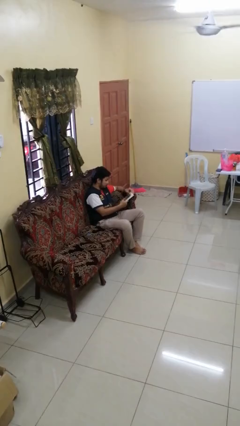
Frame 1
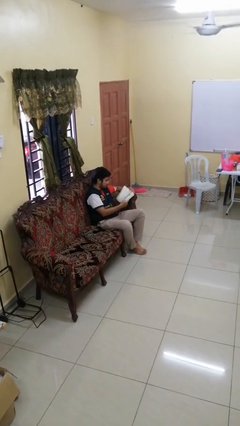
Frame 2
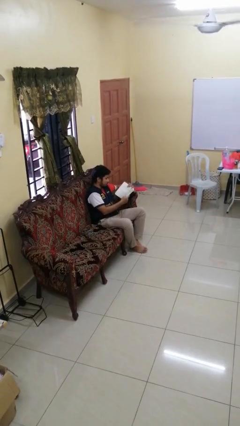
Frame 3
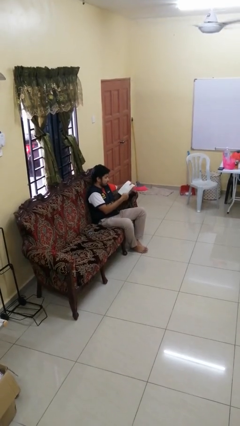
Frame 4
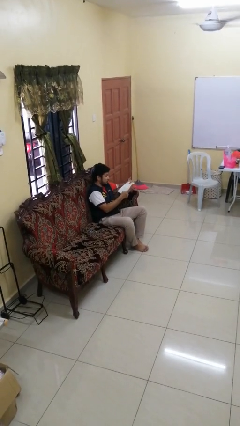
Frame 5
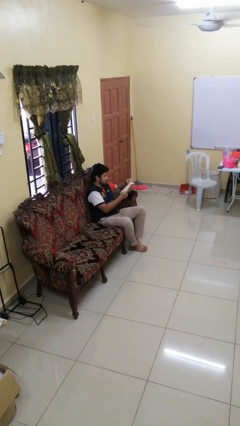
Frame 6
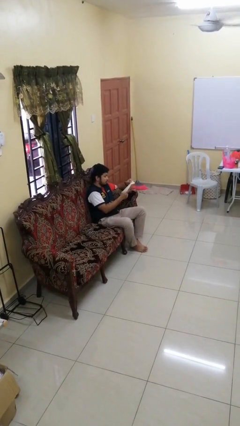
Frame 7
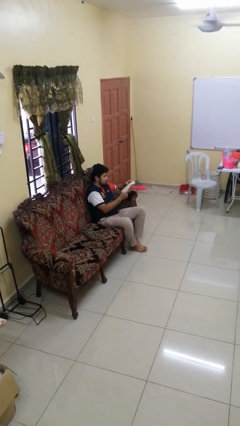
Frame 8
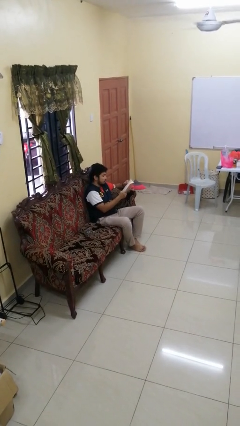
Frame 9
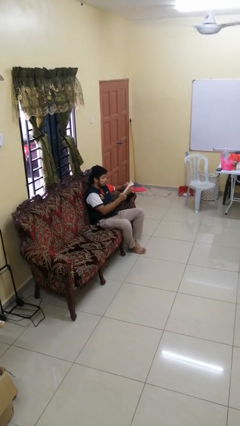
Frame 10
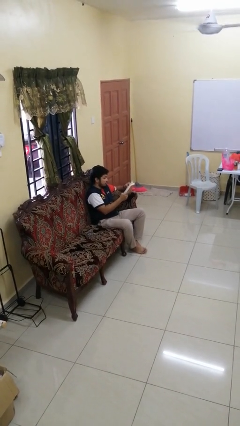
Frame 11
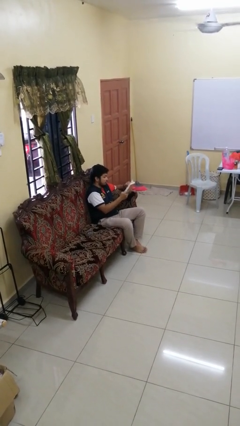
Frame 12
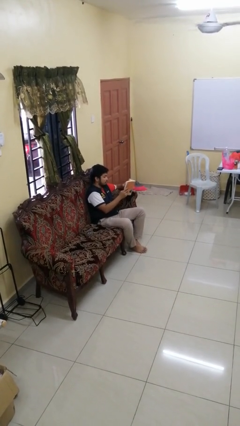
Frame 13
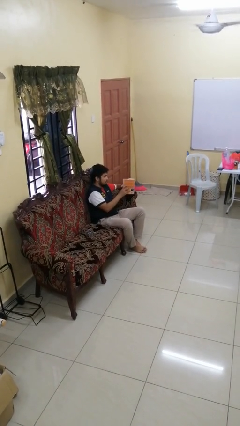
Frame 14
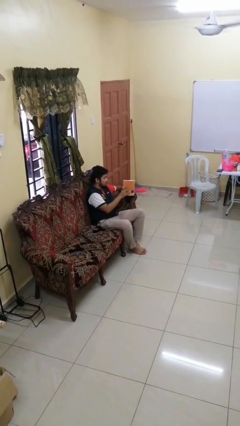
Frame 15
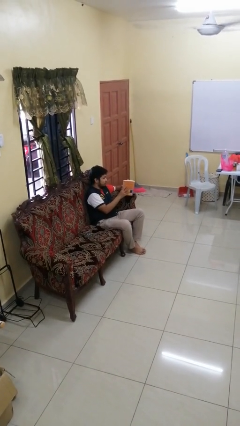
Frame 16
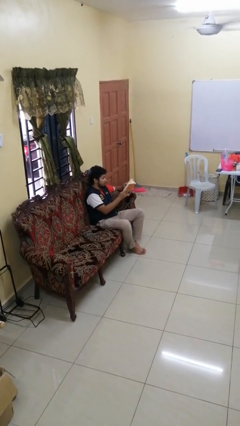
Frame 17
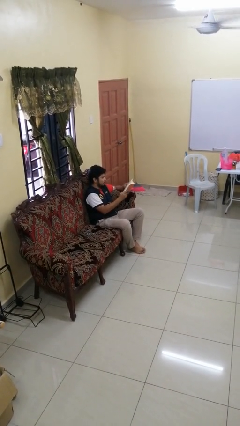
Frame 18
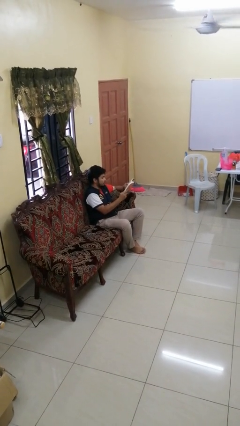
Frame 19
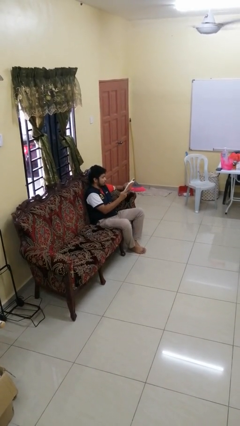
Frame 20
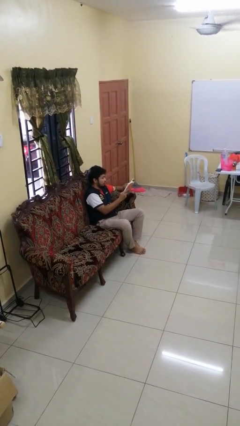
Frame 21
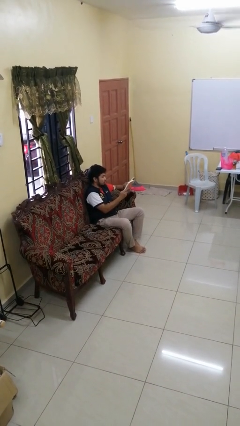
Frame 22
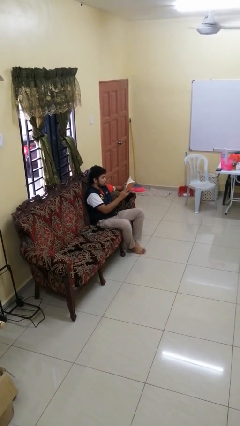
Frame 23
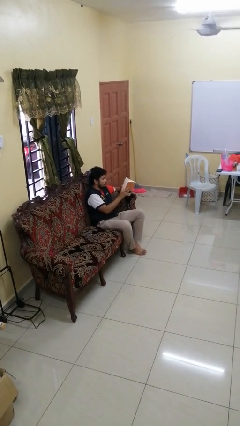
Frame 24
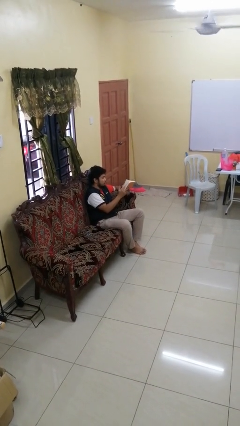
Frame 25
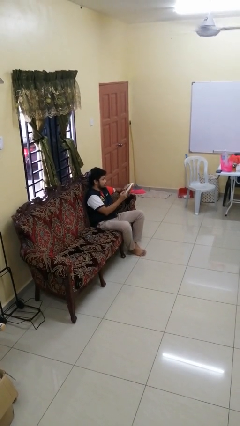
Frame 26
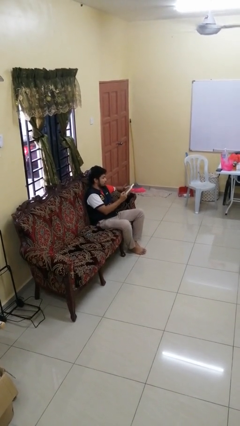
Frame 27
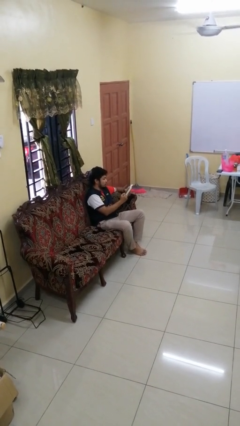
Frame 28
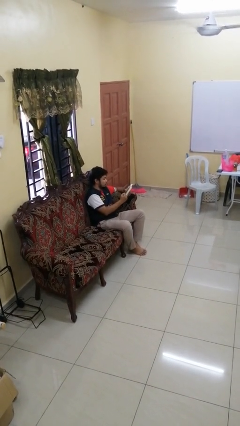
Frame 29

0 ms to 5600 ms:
person reads book

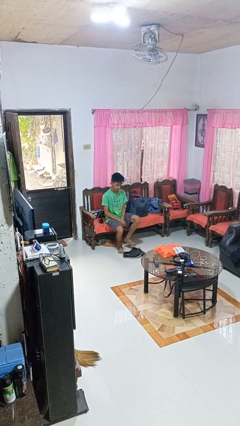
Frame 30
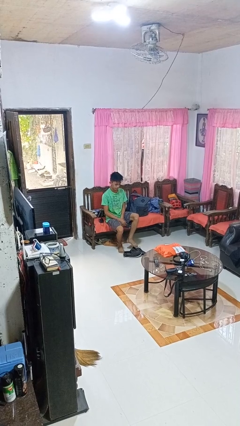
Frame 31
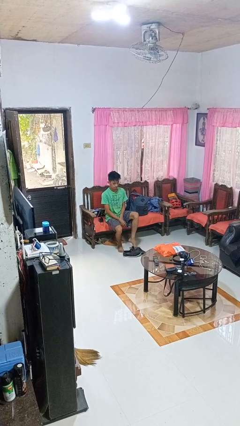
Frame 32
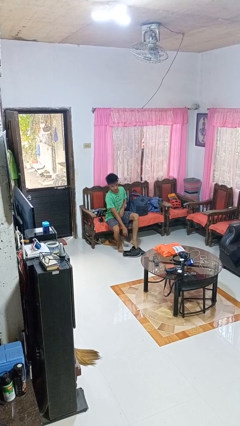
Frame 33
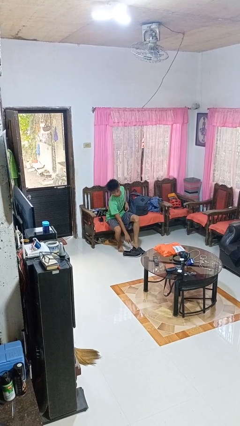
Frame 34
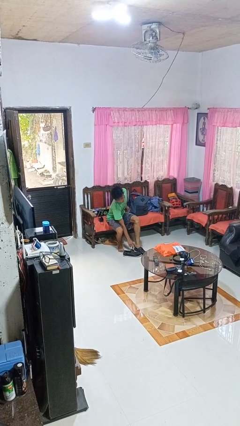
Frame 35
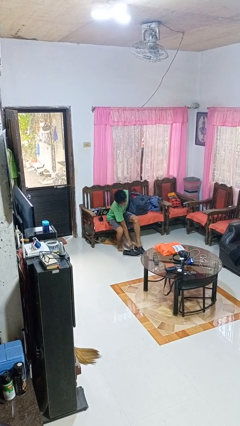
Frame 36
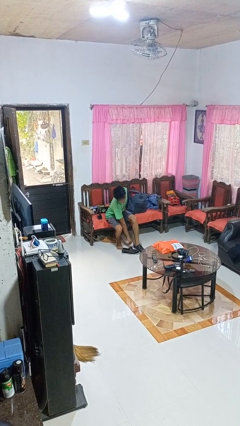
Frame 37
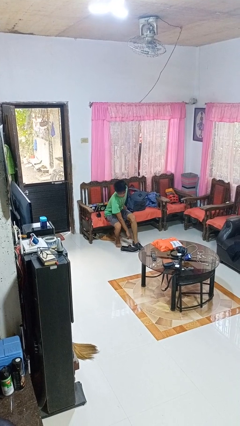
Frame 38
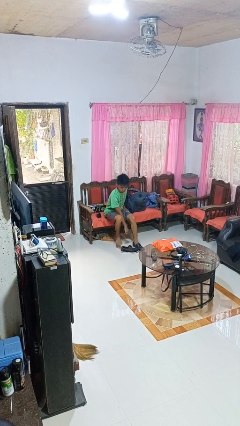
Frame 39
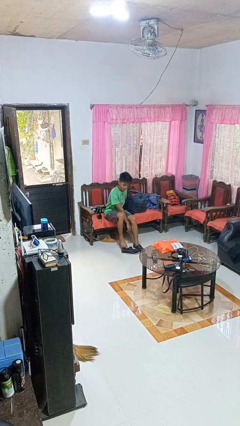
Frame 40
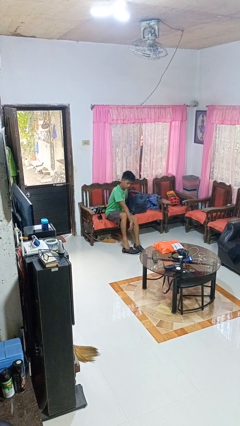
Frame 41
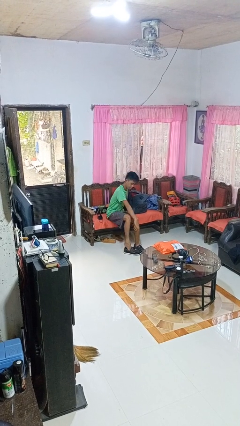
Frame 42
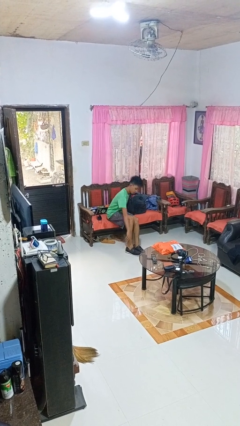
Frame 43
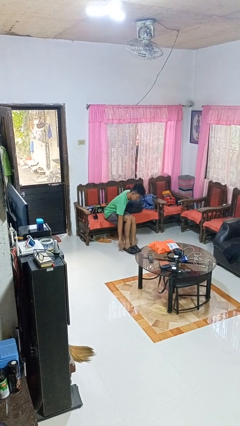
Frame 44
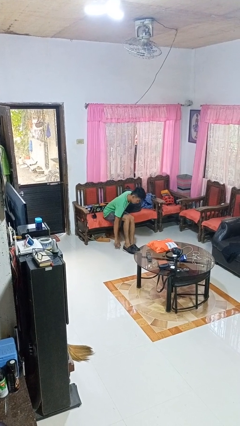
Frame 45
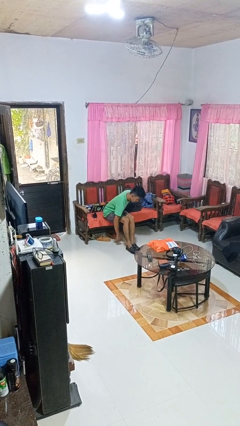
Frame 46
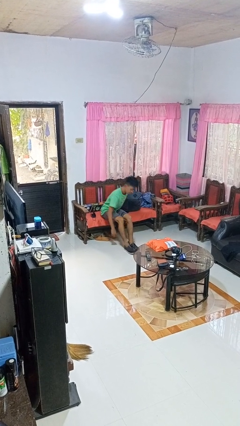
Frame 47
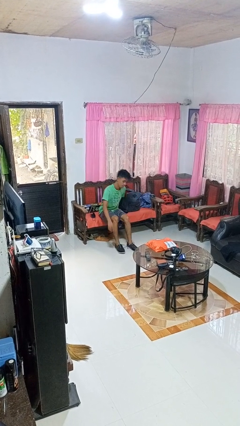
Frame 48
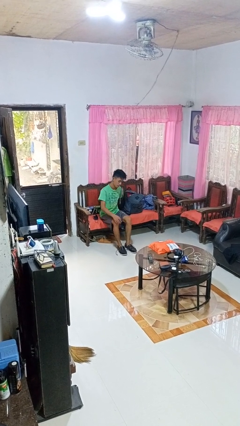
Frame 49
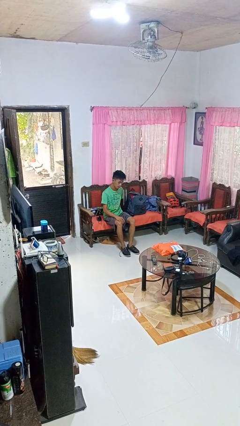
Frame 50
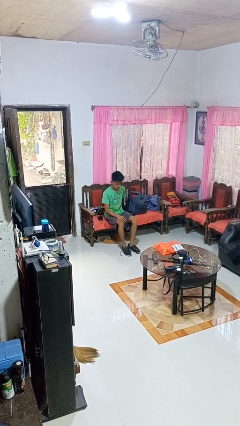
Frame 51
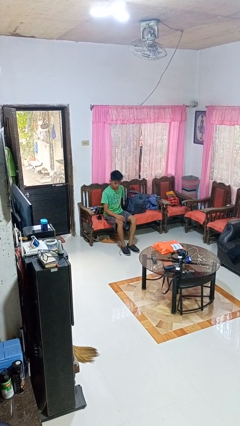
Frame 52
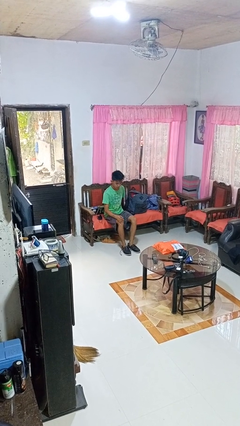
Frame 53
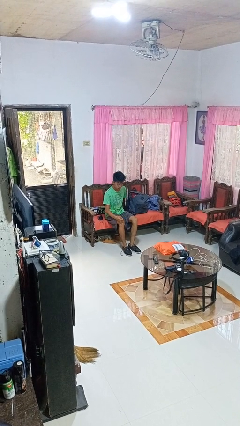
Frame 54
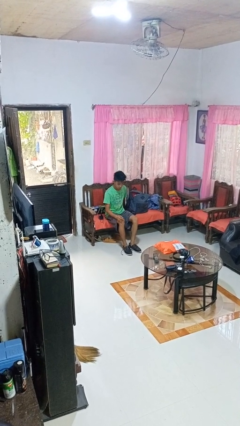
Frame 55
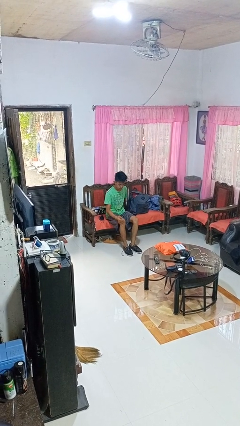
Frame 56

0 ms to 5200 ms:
person puts on shoes

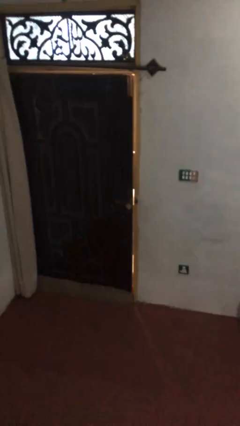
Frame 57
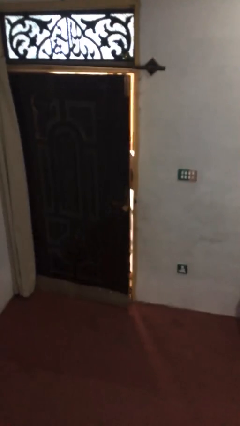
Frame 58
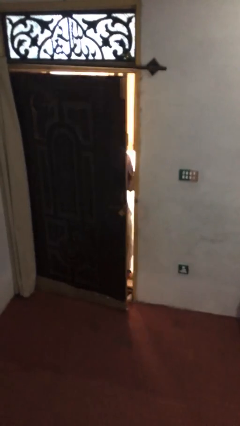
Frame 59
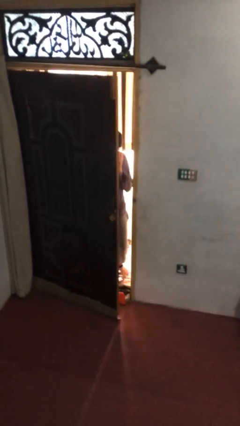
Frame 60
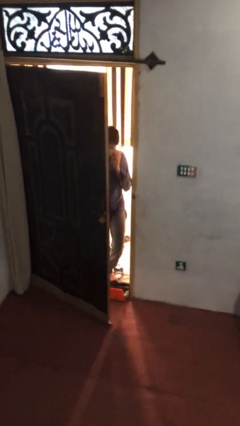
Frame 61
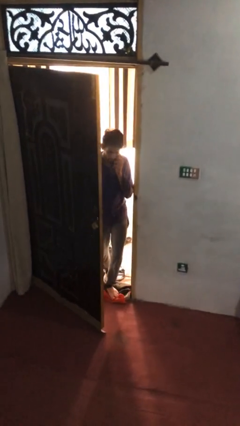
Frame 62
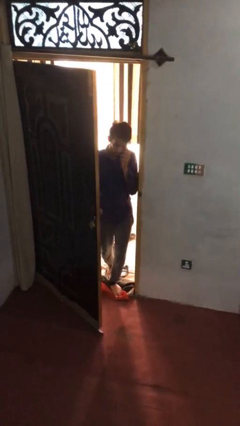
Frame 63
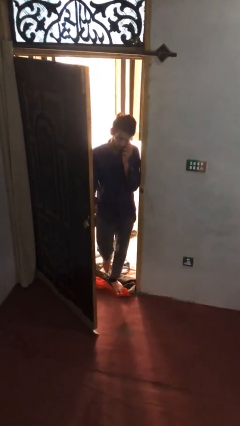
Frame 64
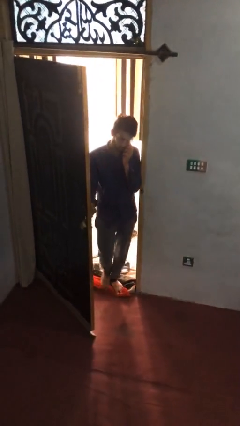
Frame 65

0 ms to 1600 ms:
person opens facility door

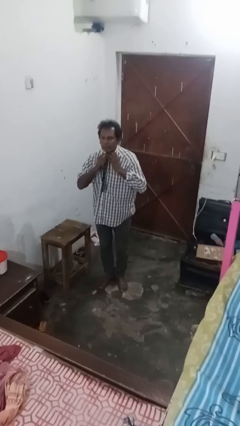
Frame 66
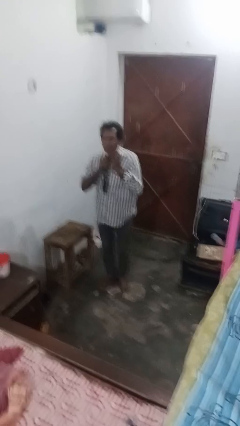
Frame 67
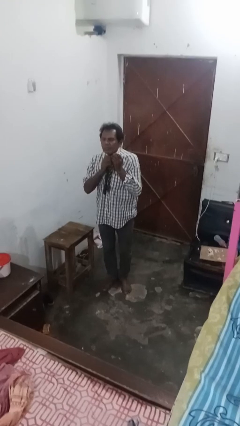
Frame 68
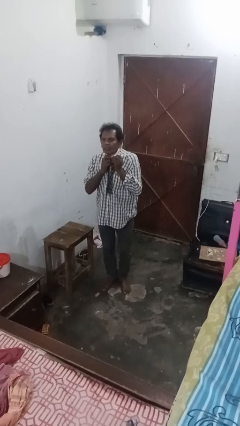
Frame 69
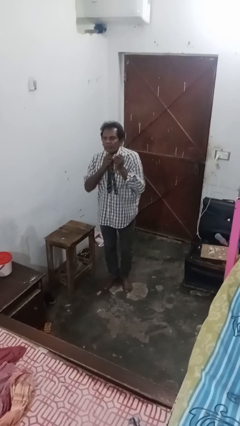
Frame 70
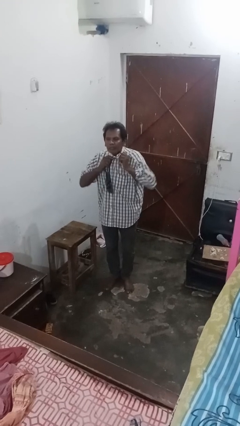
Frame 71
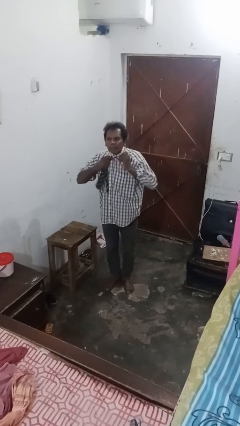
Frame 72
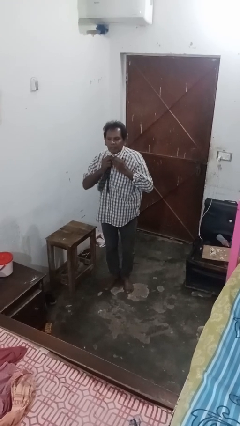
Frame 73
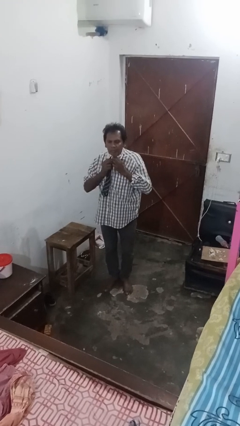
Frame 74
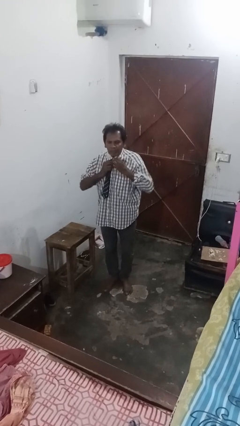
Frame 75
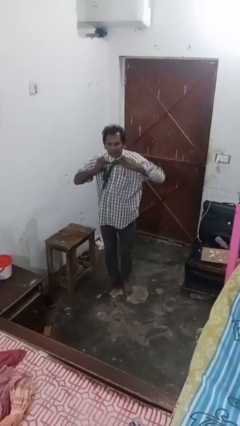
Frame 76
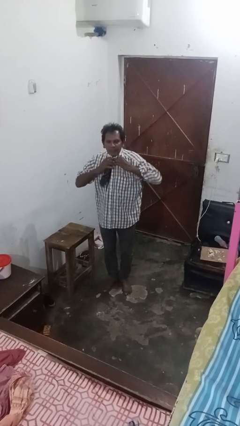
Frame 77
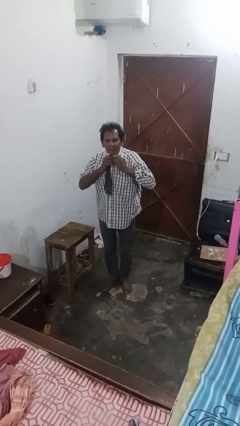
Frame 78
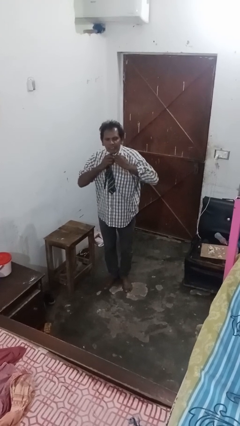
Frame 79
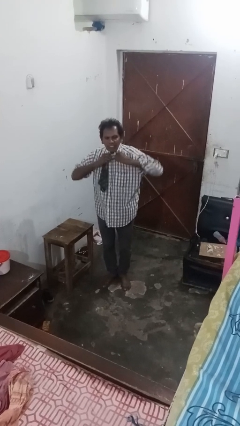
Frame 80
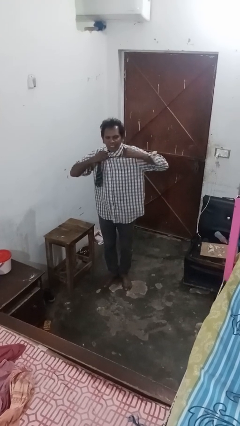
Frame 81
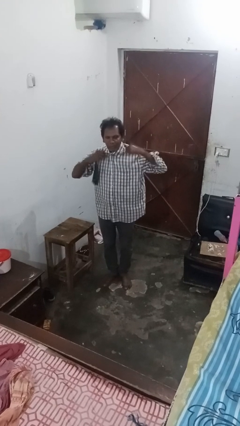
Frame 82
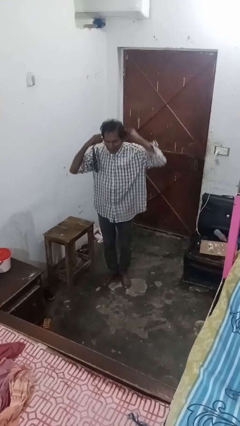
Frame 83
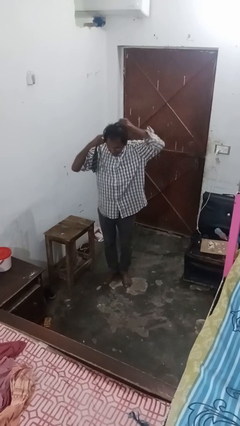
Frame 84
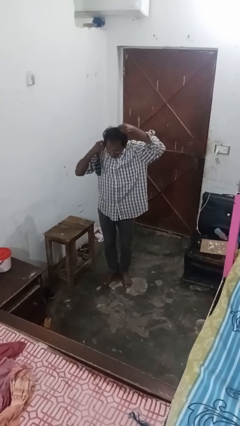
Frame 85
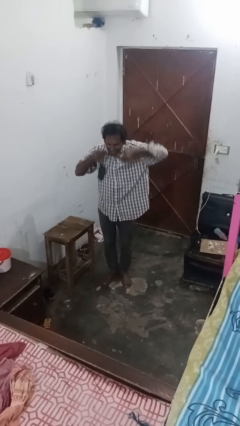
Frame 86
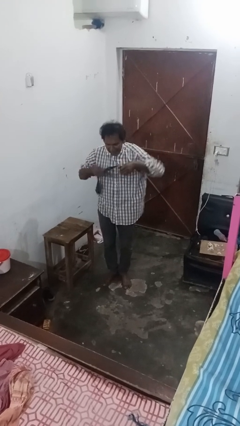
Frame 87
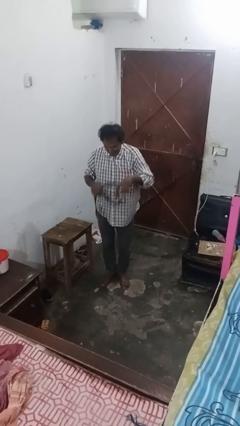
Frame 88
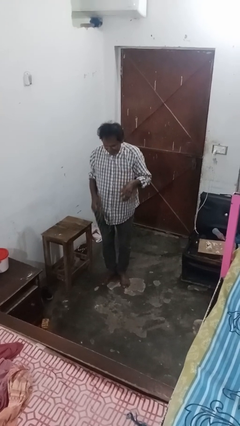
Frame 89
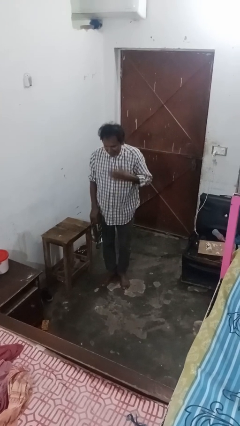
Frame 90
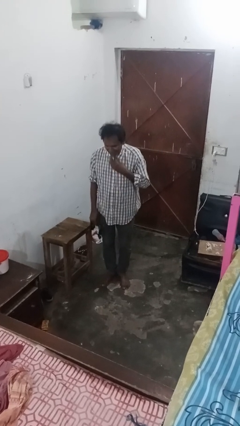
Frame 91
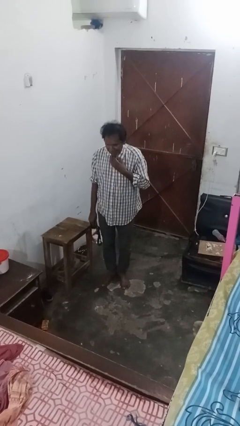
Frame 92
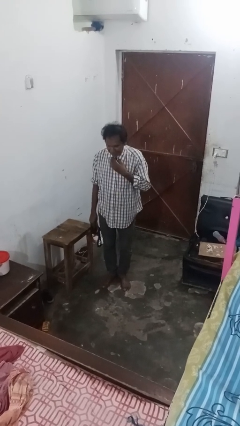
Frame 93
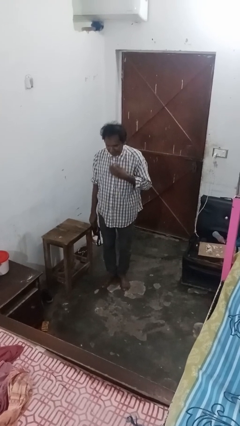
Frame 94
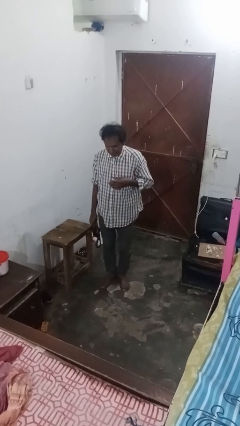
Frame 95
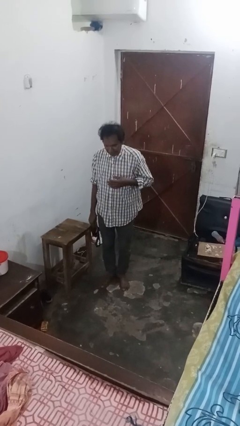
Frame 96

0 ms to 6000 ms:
person takes off necktie
